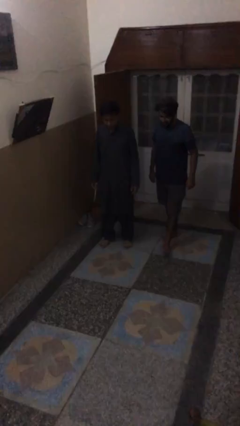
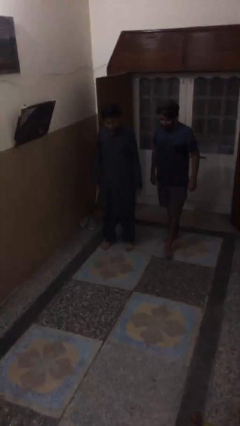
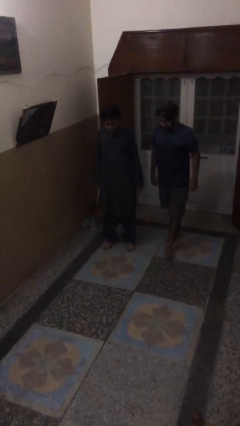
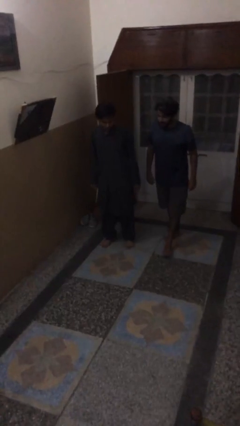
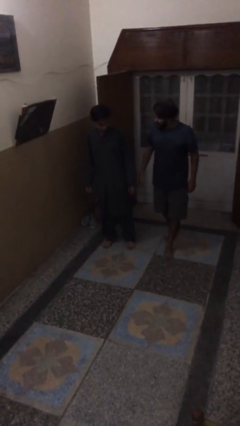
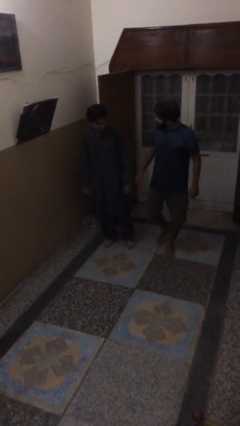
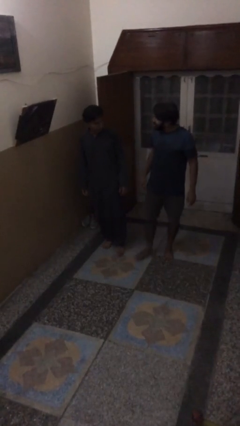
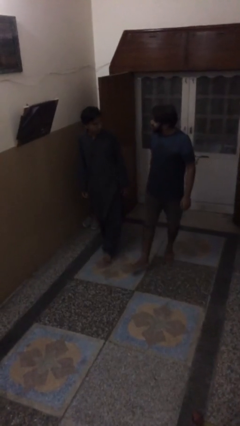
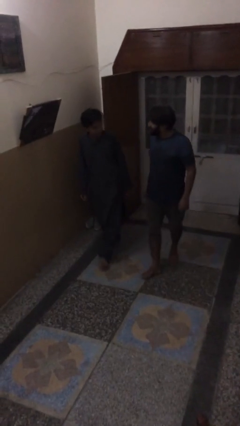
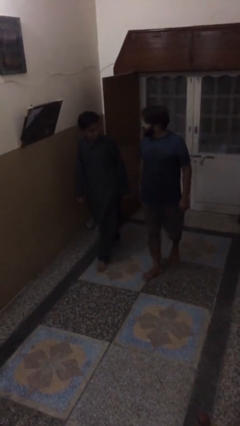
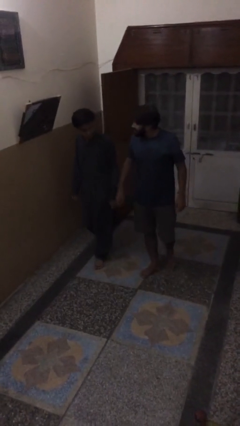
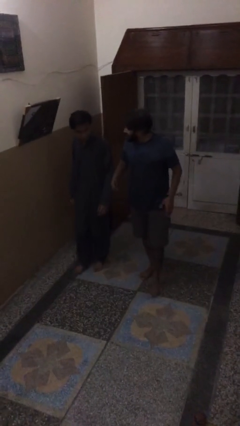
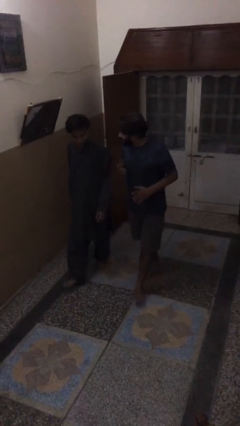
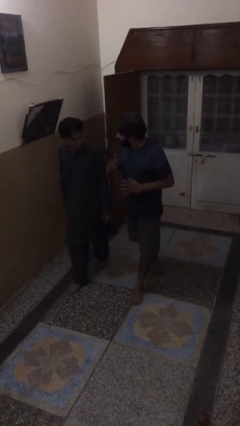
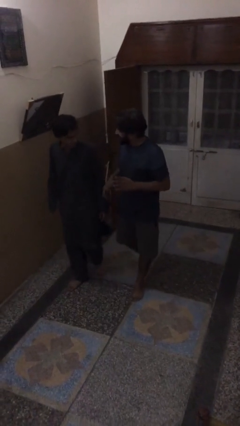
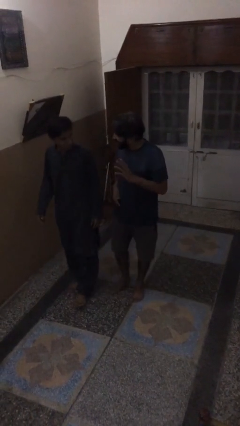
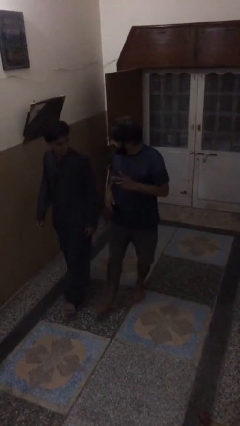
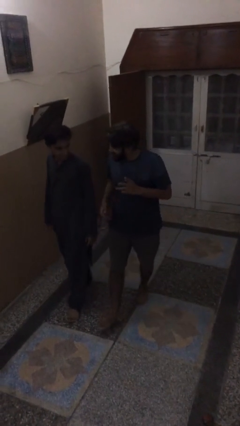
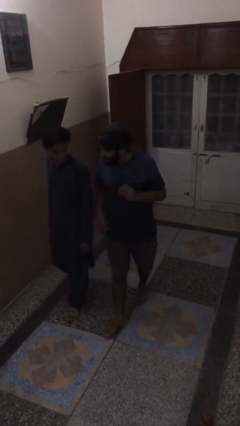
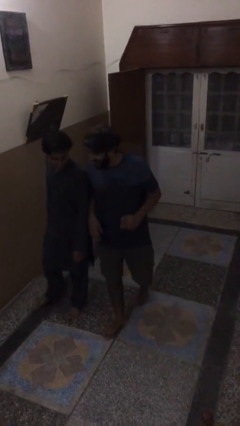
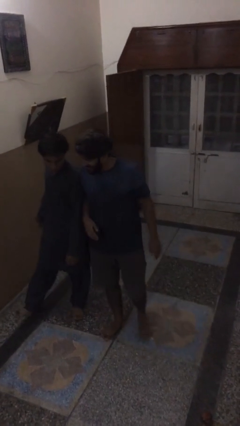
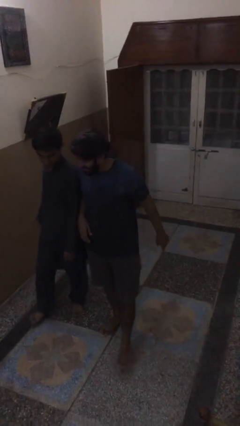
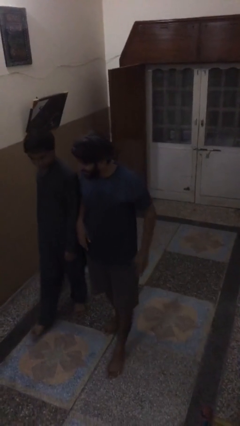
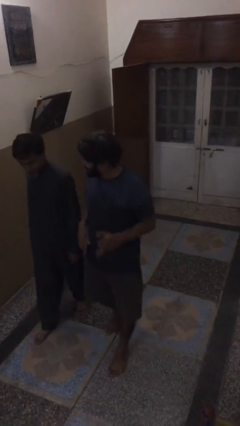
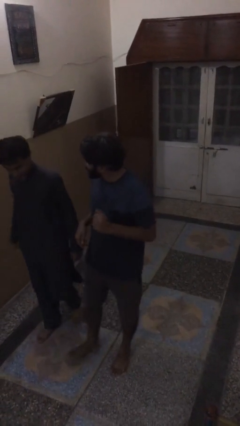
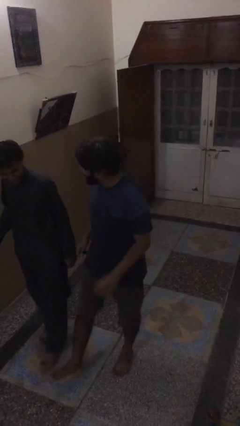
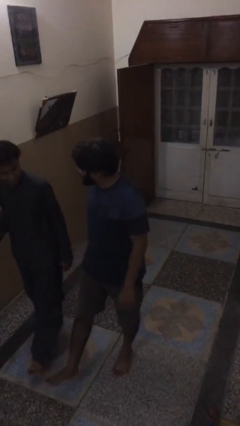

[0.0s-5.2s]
person talks to person

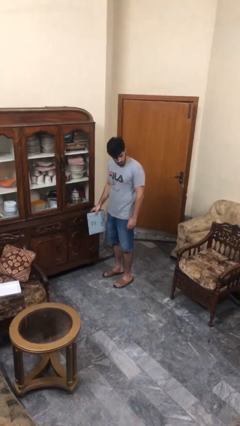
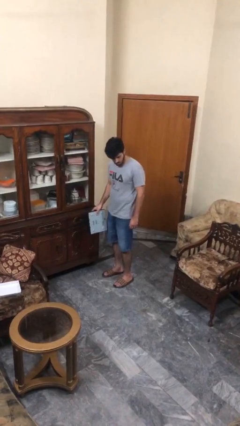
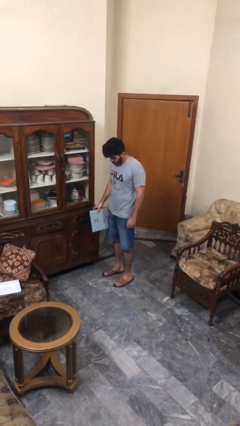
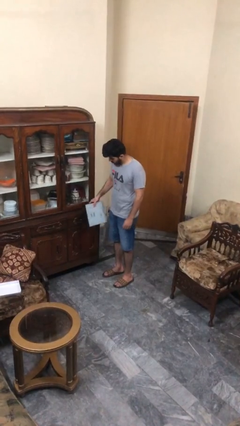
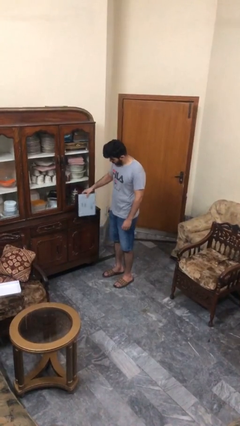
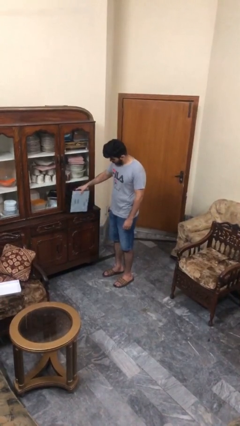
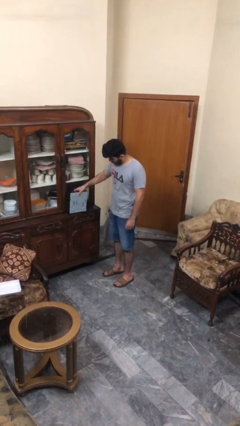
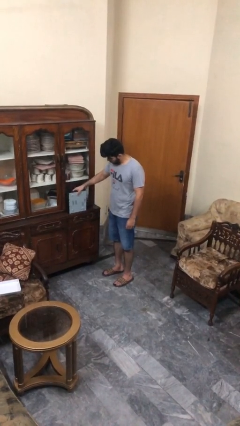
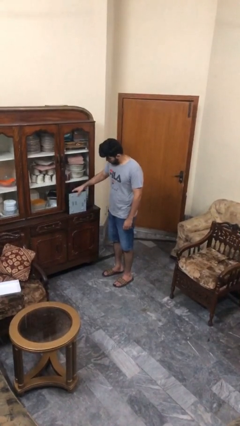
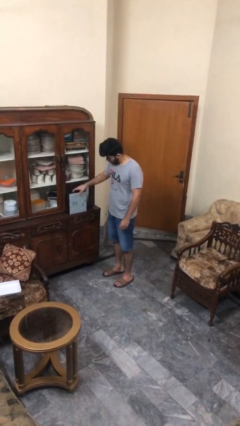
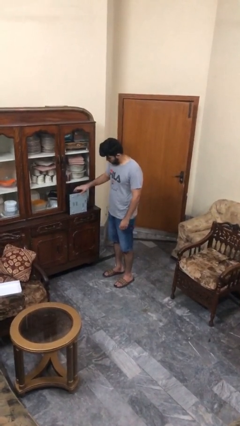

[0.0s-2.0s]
person puts down object on countertop

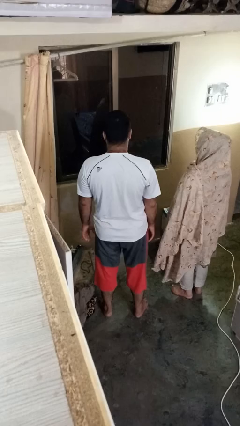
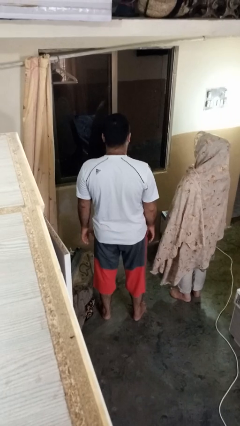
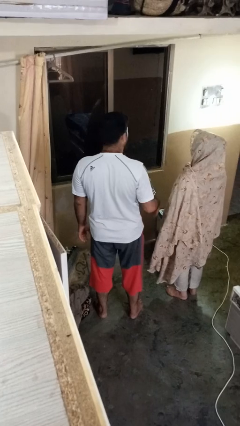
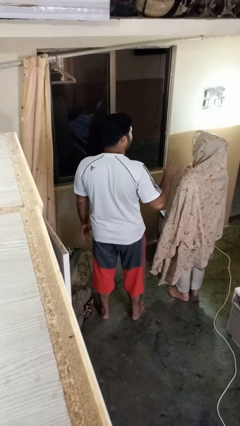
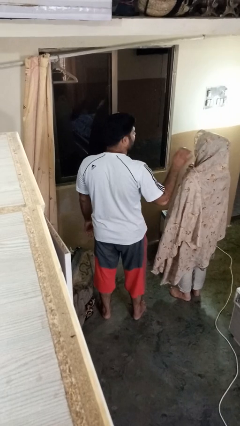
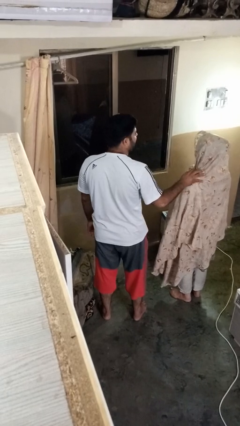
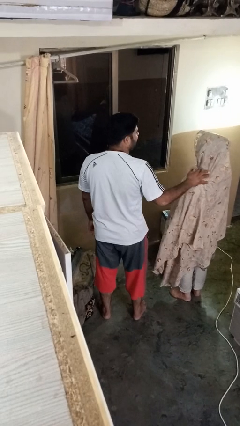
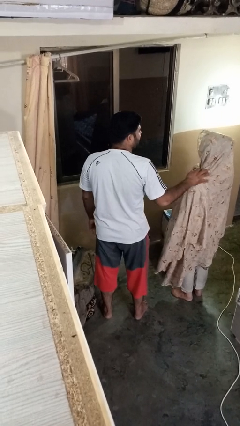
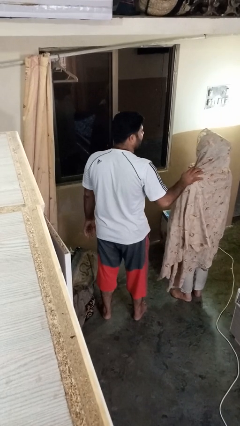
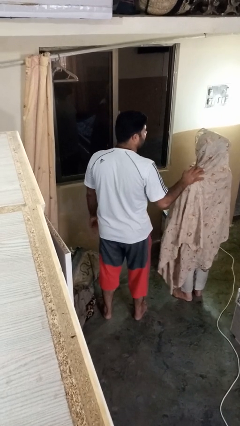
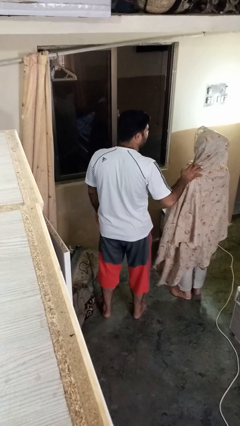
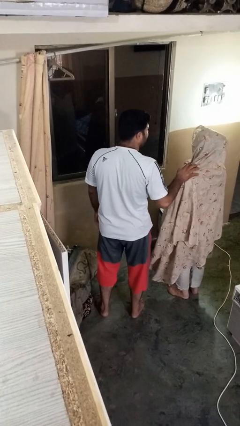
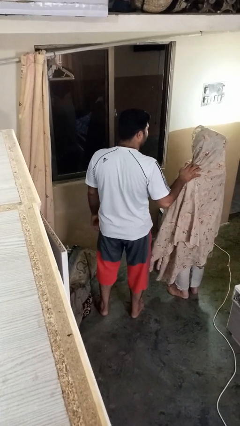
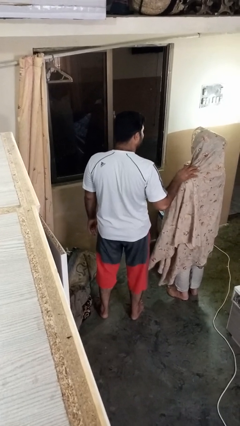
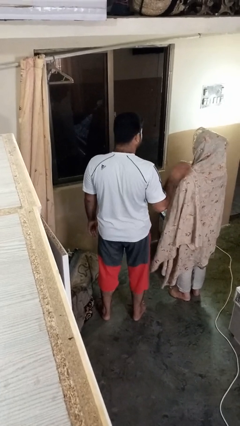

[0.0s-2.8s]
person shoves person

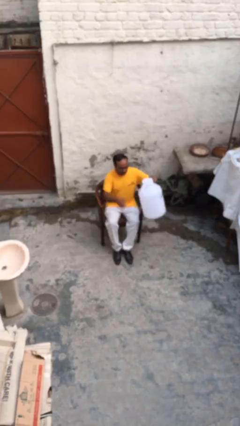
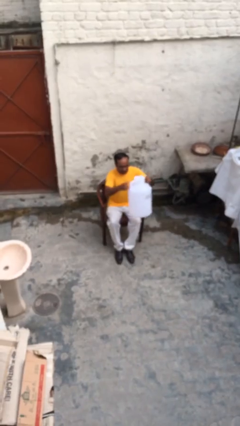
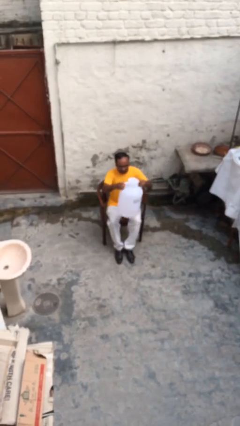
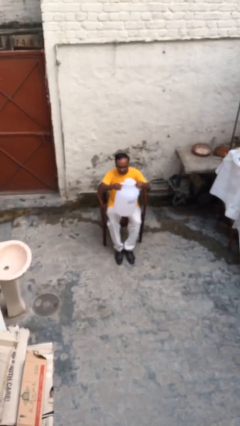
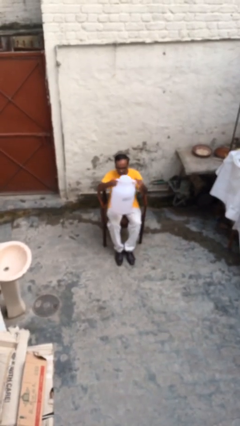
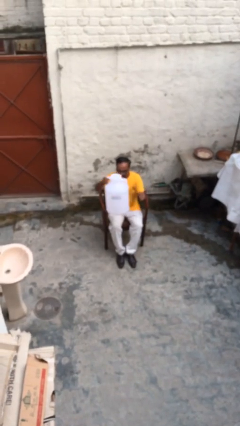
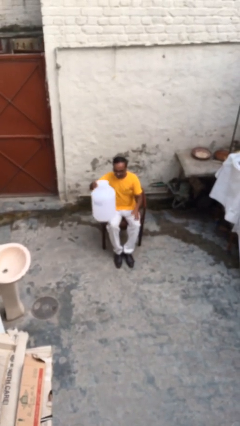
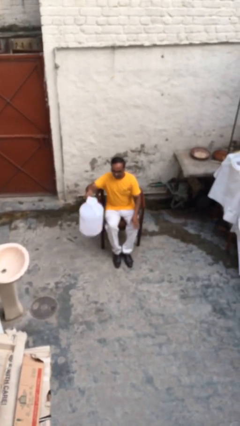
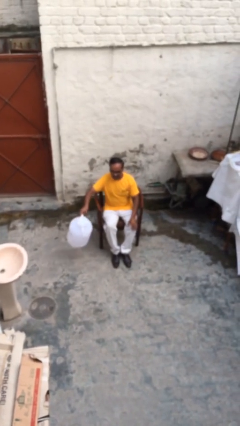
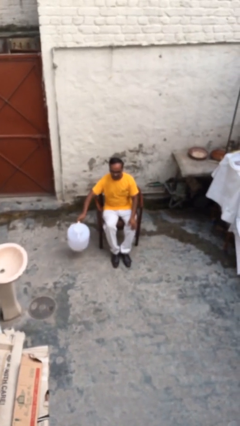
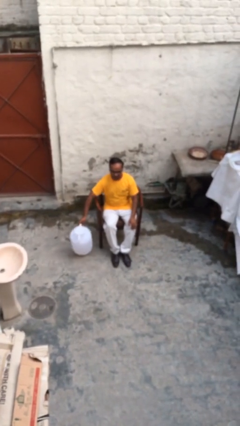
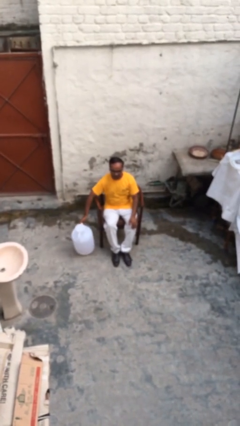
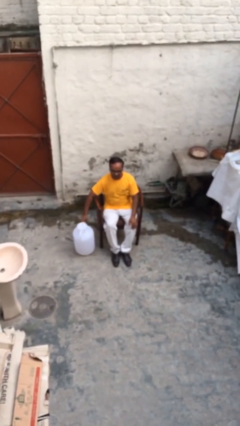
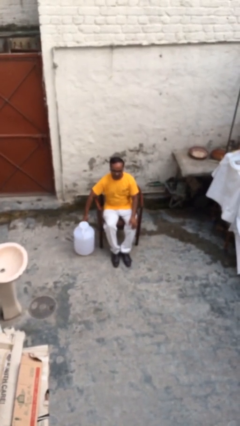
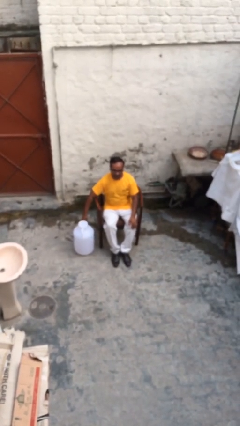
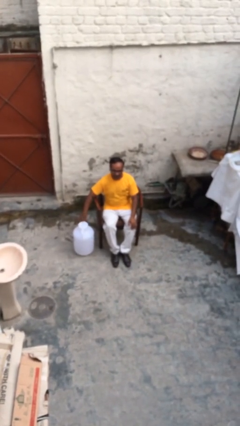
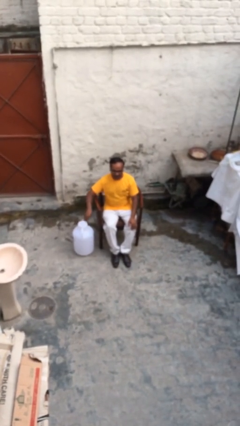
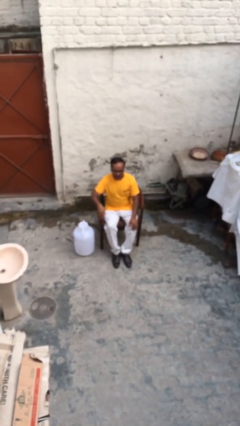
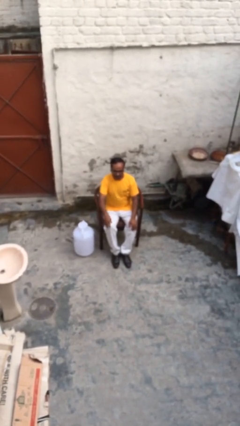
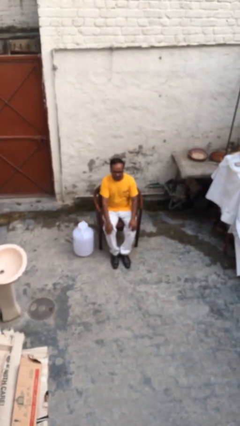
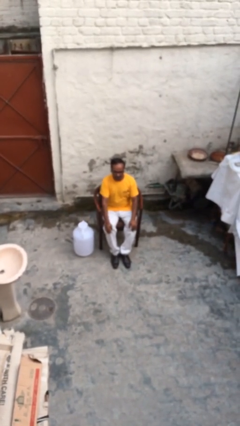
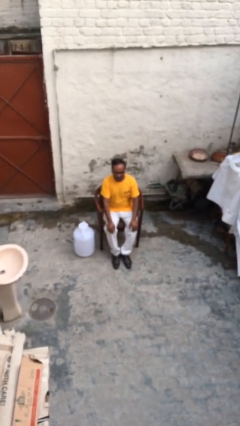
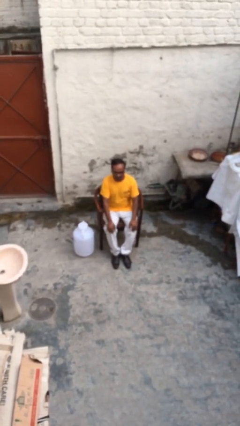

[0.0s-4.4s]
person puts down object on floor

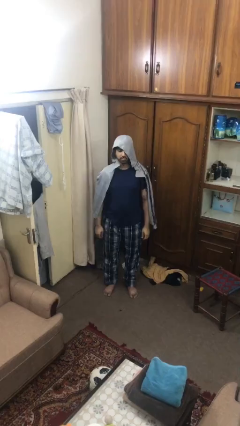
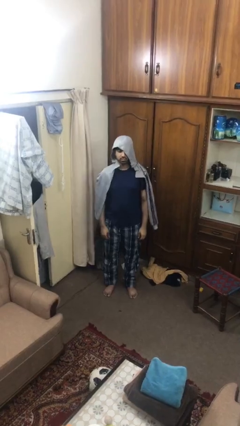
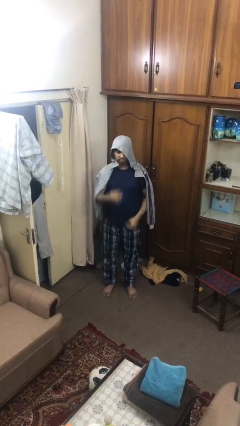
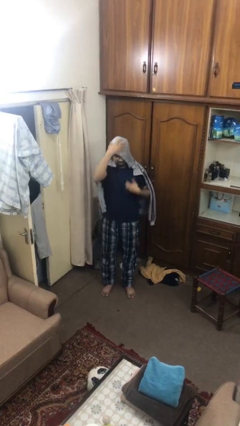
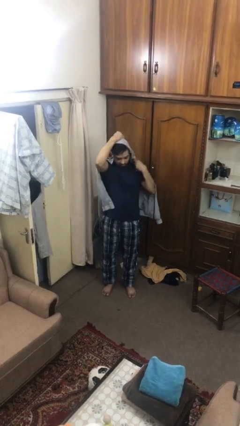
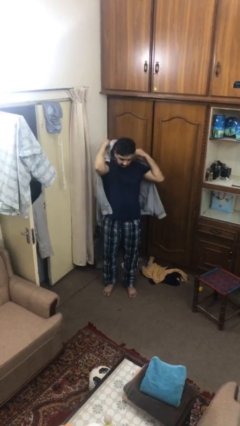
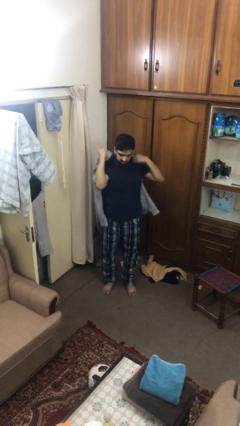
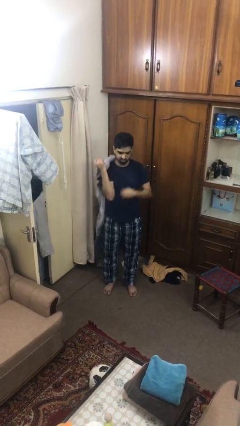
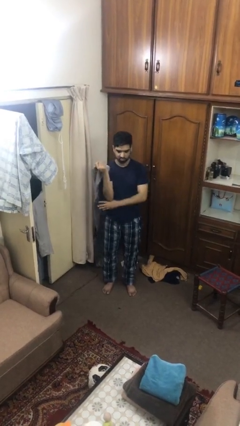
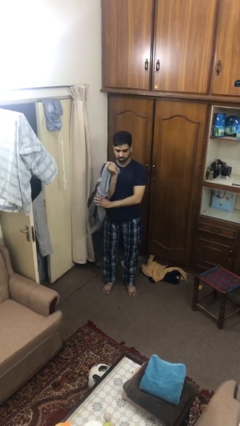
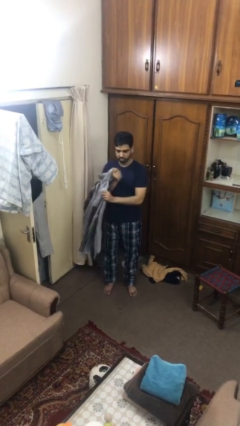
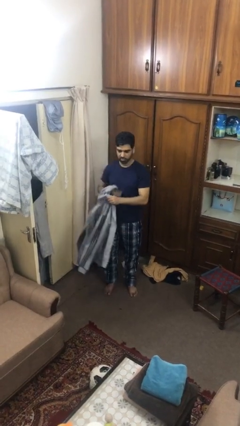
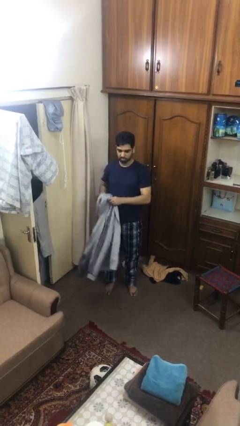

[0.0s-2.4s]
person takes off hoodie

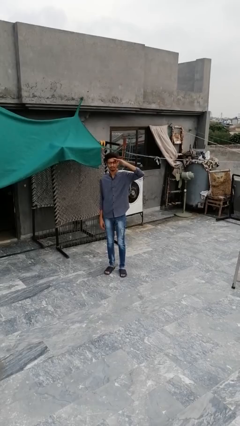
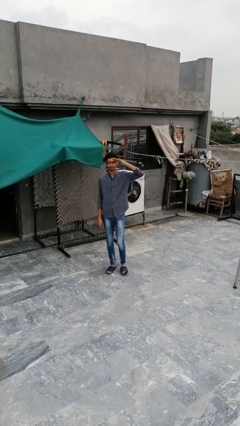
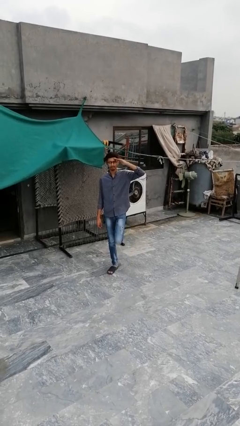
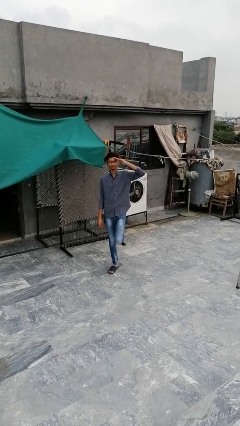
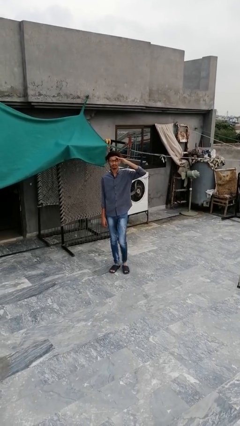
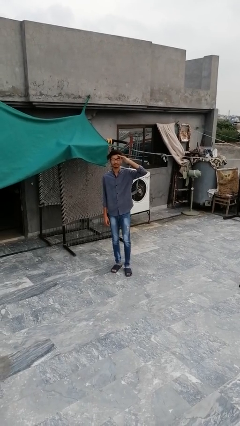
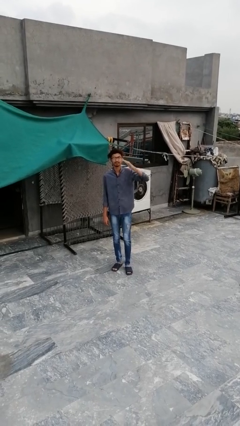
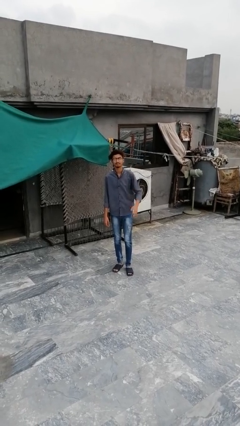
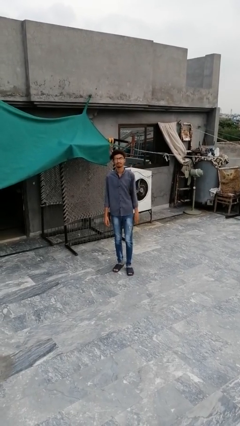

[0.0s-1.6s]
person salutes
